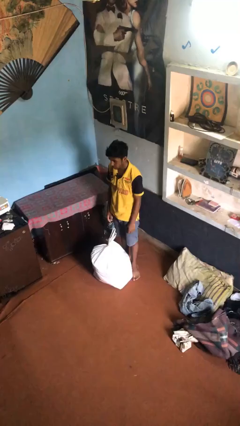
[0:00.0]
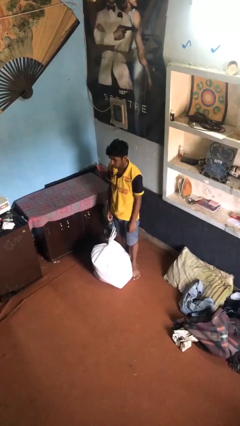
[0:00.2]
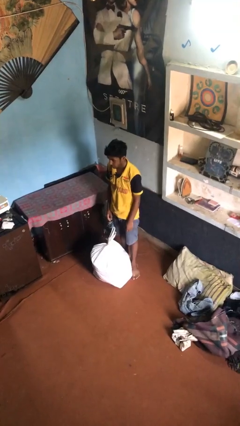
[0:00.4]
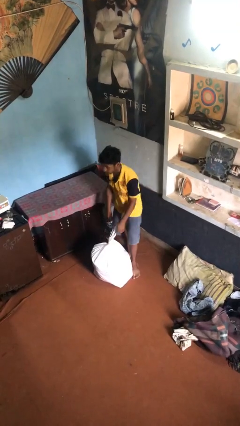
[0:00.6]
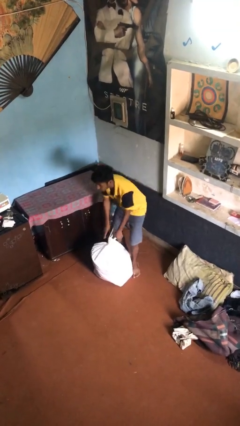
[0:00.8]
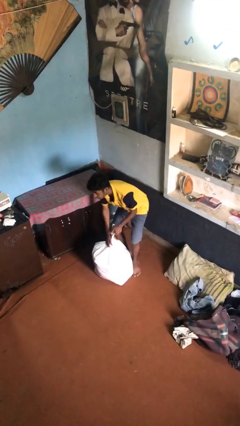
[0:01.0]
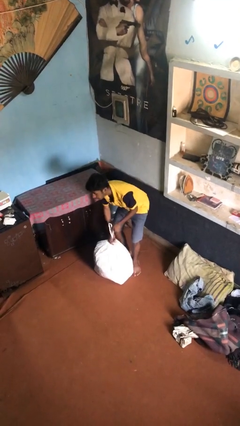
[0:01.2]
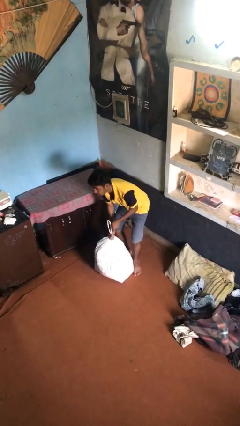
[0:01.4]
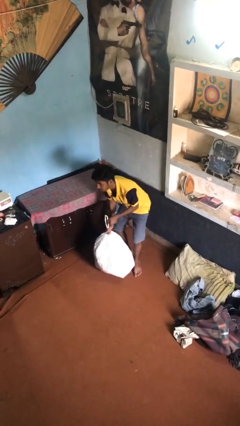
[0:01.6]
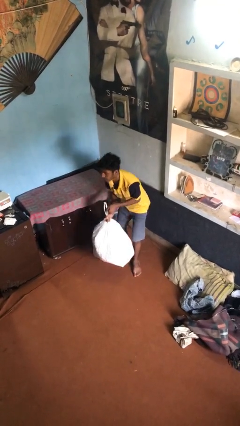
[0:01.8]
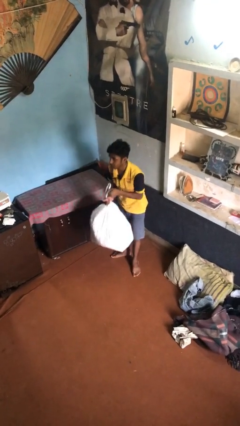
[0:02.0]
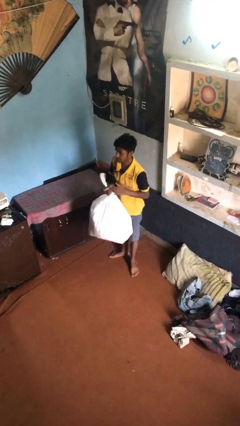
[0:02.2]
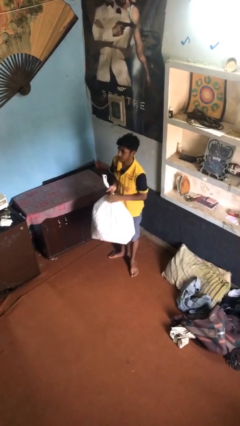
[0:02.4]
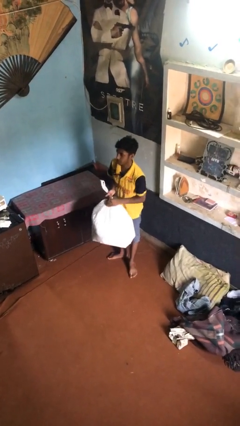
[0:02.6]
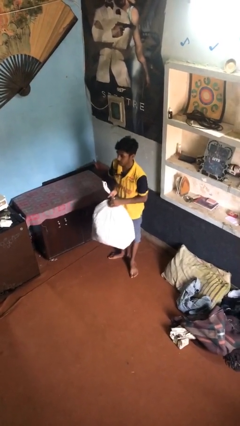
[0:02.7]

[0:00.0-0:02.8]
person picks up object from floor

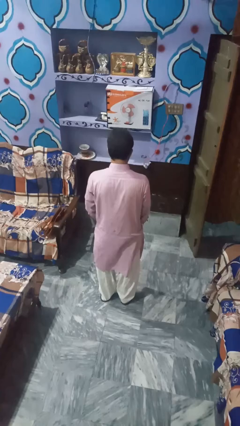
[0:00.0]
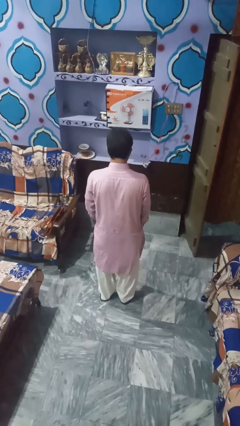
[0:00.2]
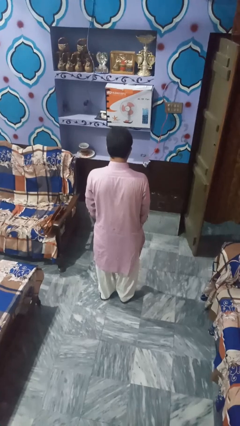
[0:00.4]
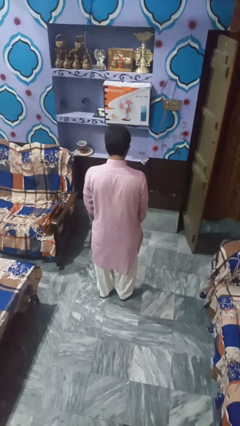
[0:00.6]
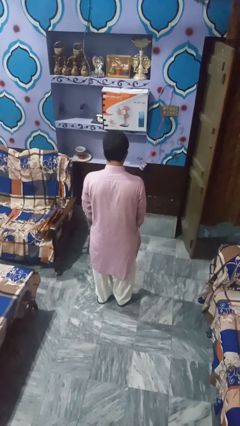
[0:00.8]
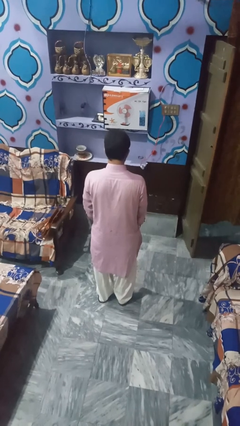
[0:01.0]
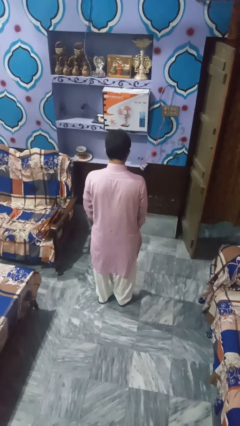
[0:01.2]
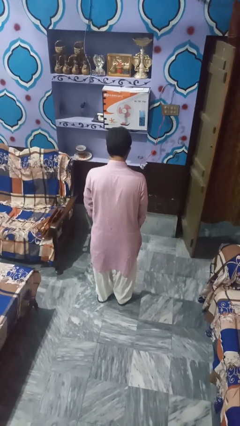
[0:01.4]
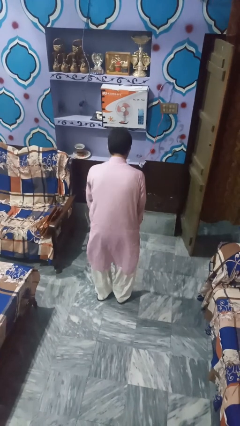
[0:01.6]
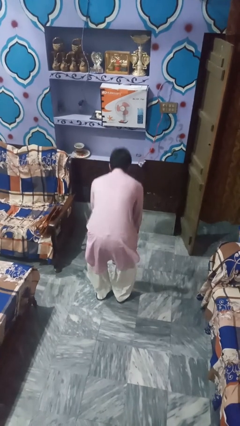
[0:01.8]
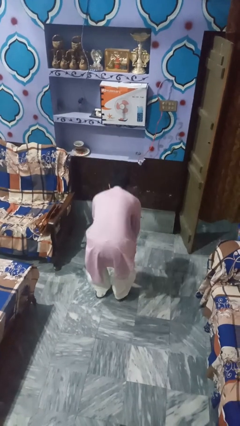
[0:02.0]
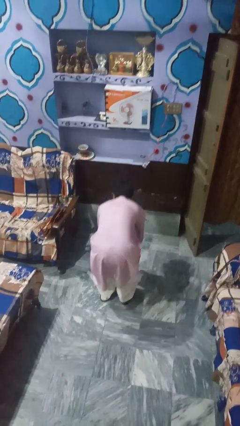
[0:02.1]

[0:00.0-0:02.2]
person catches dropped object

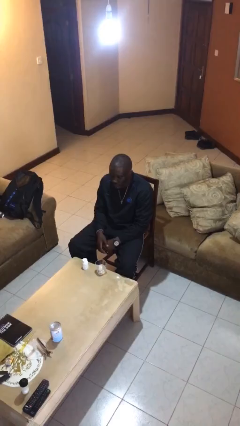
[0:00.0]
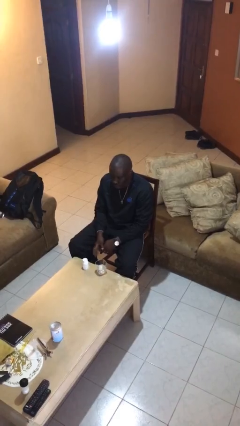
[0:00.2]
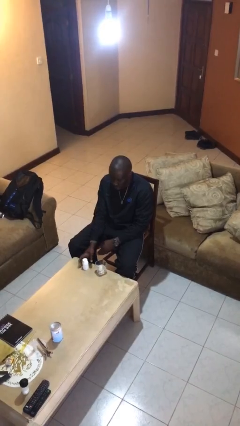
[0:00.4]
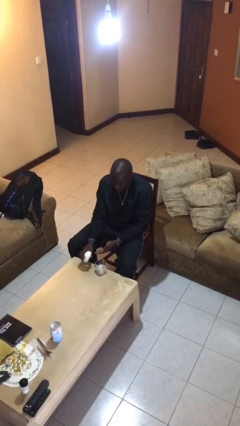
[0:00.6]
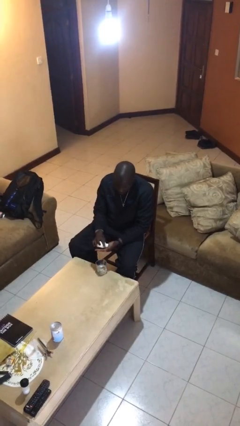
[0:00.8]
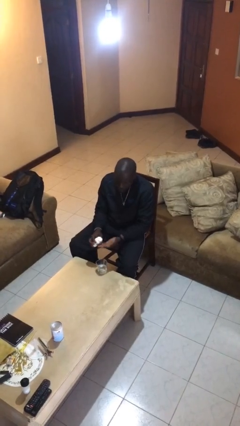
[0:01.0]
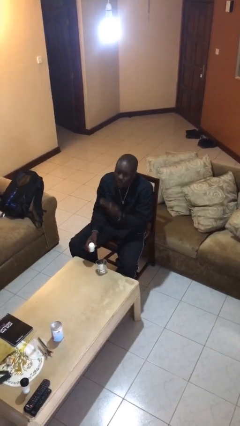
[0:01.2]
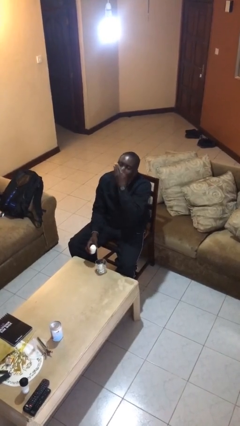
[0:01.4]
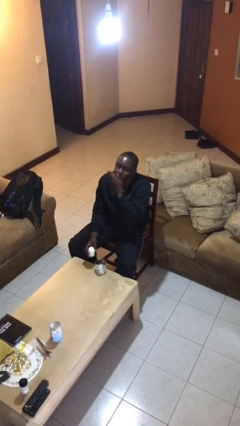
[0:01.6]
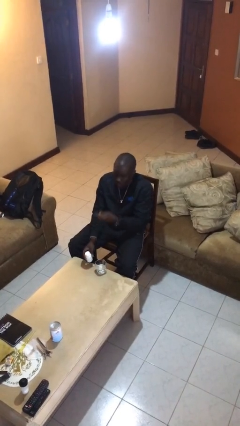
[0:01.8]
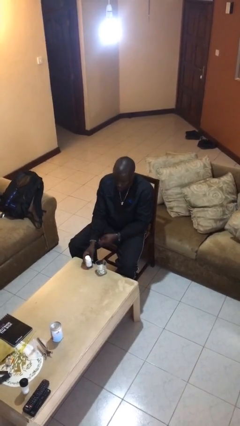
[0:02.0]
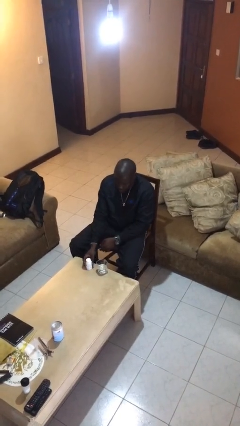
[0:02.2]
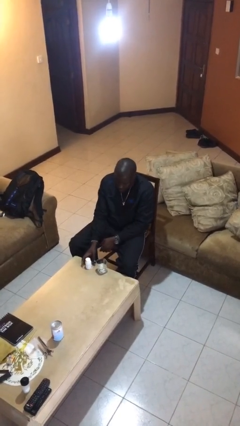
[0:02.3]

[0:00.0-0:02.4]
person takes medicine pills

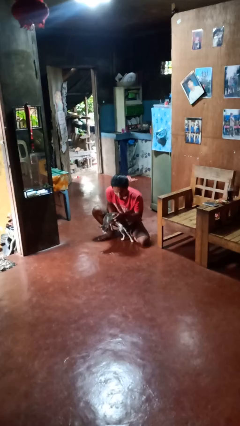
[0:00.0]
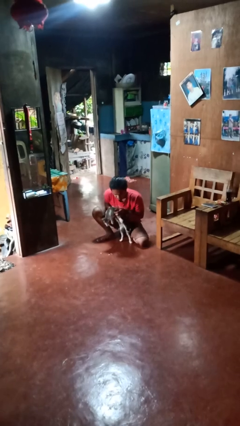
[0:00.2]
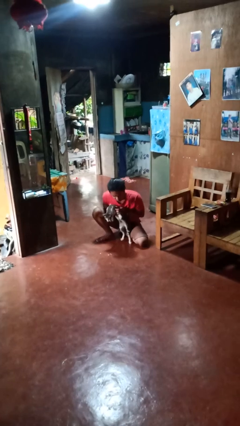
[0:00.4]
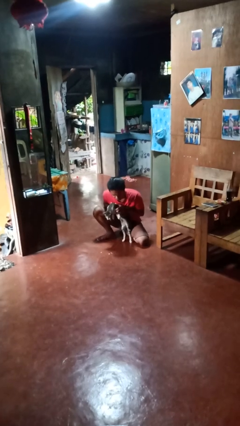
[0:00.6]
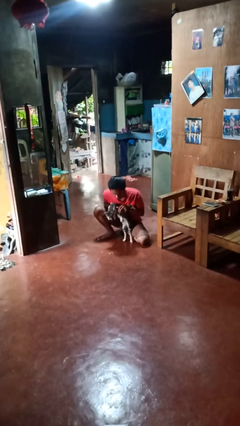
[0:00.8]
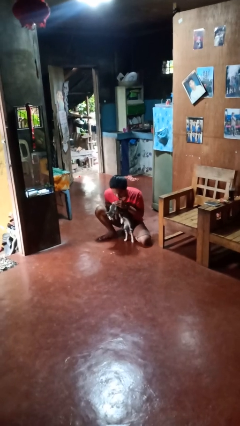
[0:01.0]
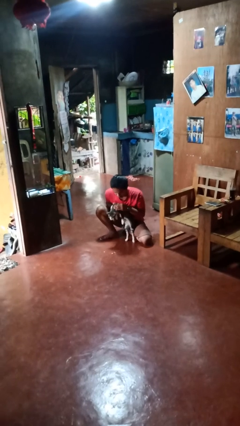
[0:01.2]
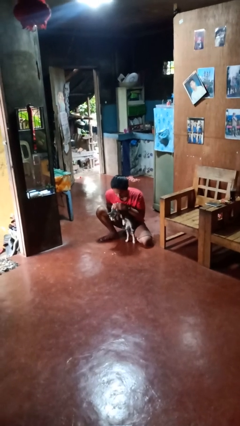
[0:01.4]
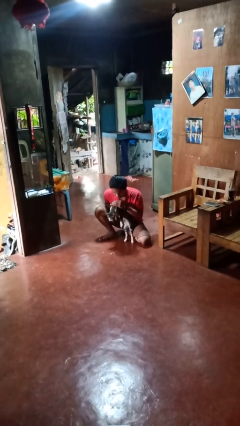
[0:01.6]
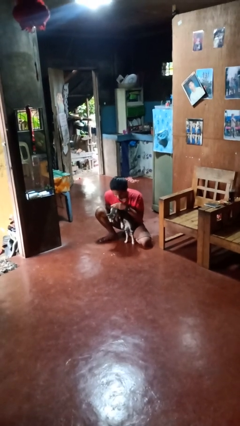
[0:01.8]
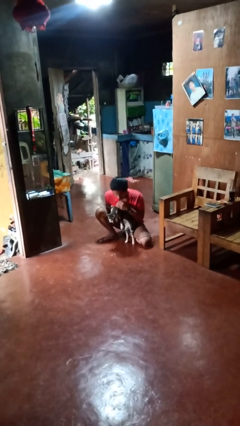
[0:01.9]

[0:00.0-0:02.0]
person hugs cat

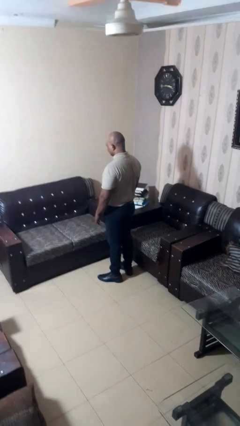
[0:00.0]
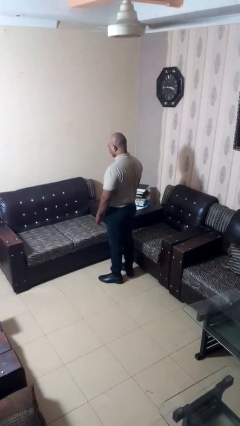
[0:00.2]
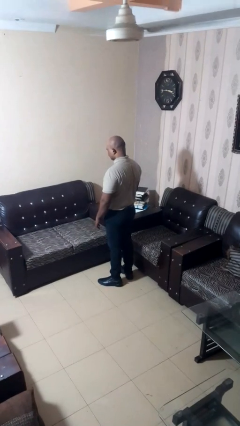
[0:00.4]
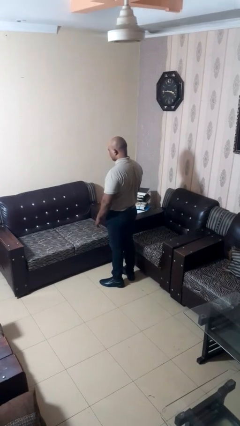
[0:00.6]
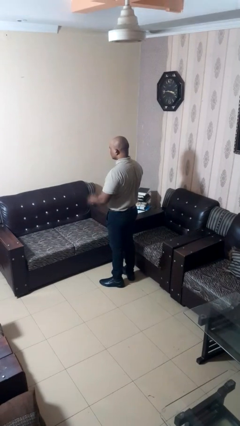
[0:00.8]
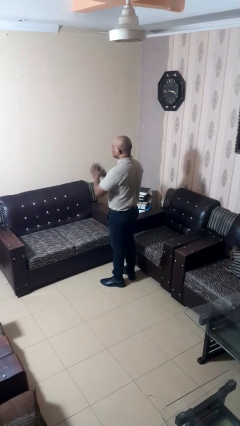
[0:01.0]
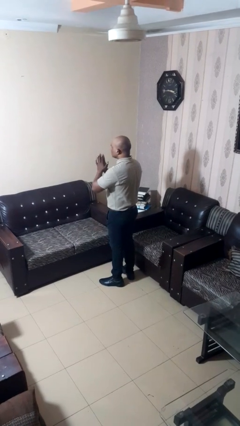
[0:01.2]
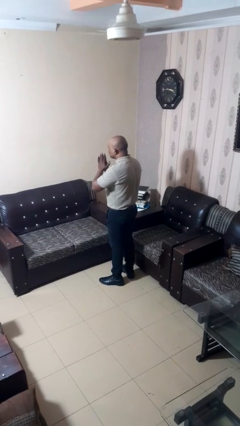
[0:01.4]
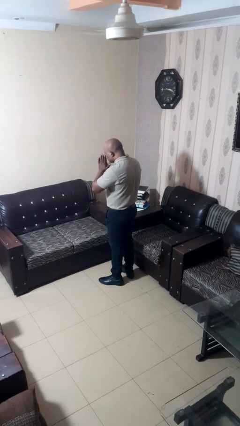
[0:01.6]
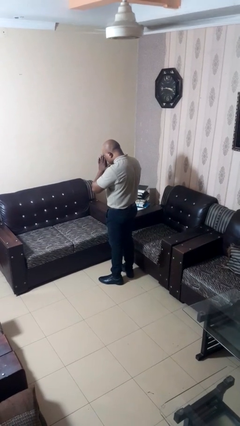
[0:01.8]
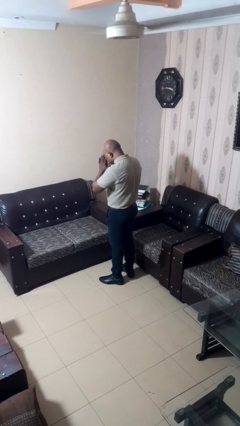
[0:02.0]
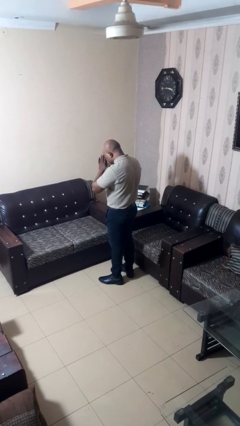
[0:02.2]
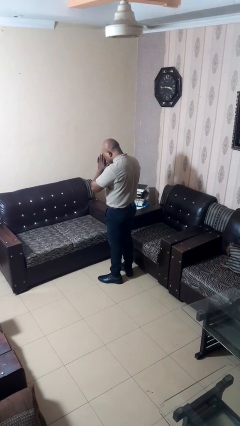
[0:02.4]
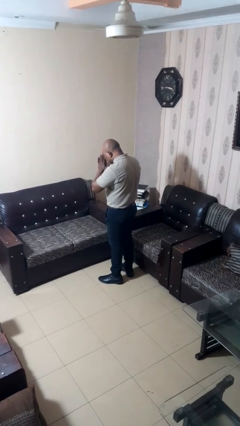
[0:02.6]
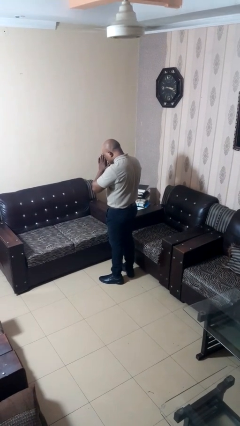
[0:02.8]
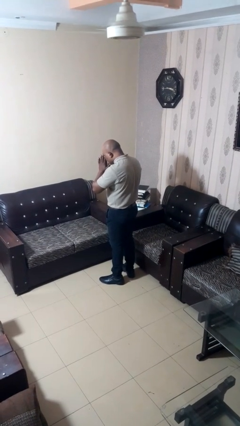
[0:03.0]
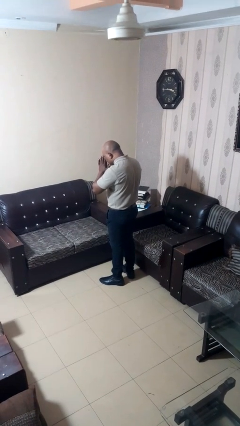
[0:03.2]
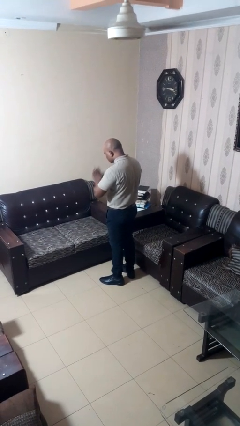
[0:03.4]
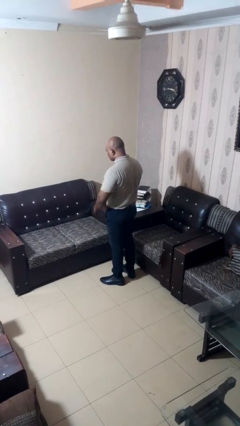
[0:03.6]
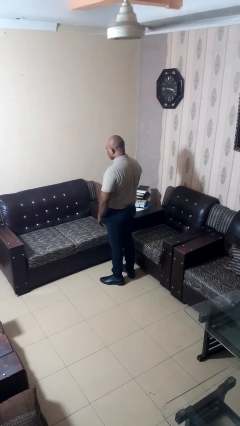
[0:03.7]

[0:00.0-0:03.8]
person prays

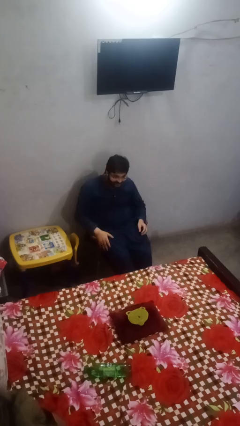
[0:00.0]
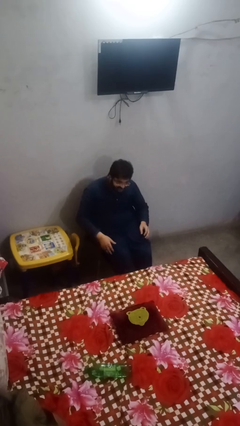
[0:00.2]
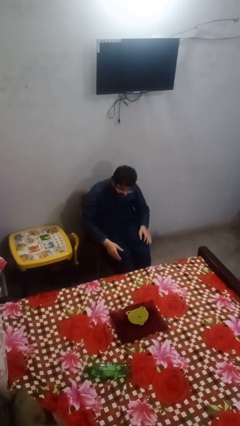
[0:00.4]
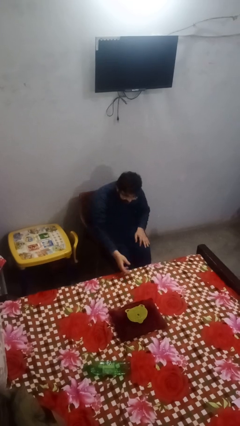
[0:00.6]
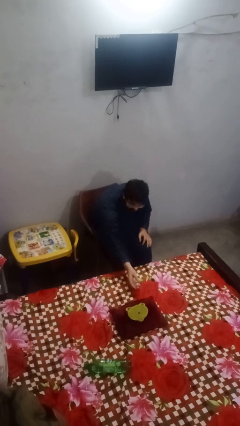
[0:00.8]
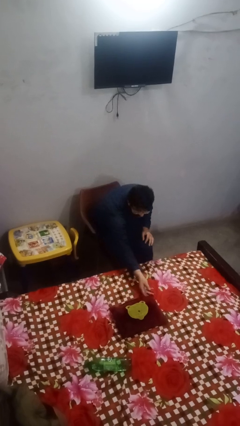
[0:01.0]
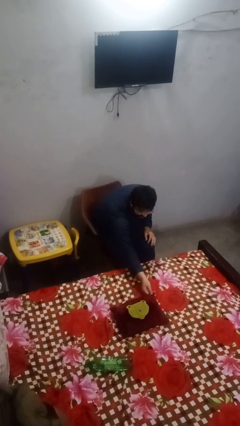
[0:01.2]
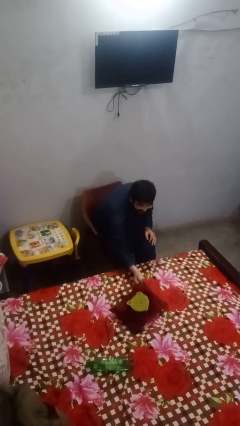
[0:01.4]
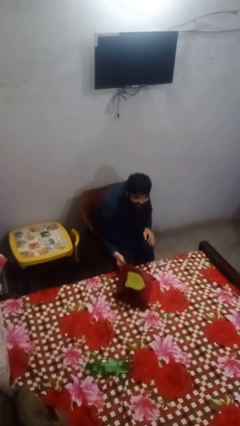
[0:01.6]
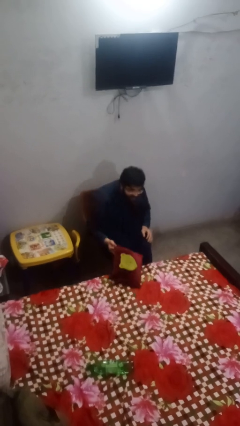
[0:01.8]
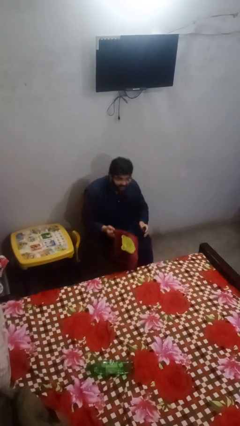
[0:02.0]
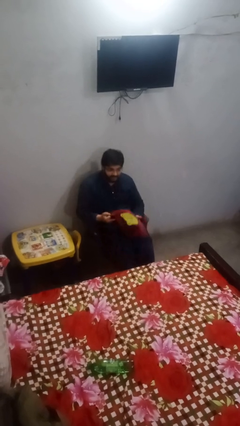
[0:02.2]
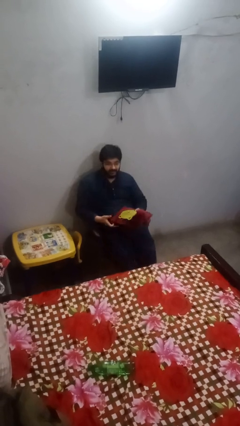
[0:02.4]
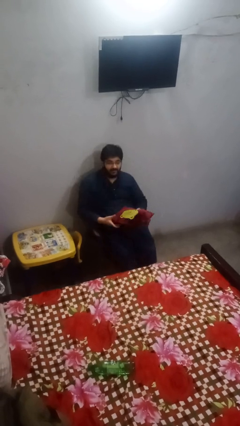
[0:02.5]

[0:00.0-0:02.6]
person picks up object from bed

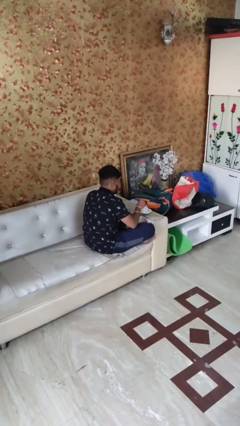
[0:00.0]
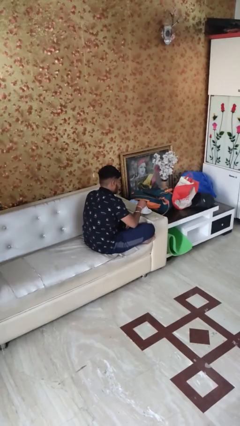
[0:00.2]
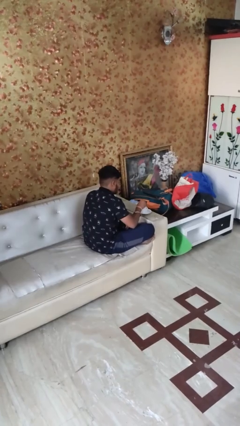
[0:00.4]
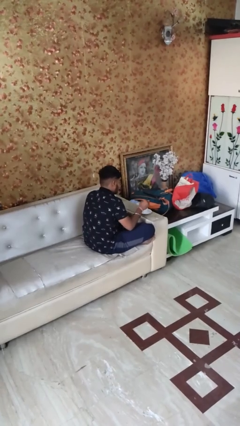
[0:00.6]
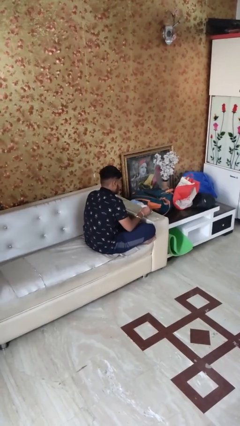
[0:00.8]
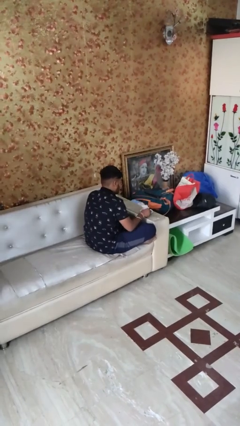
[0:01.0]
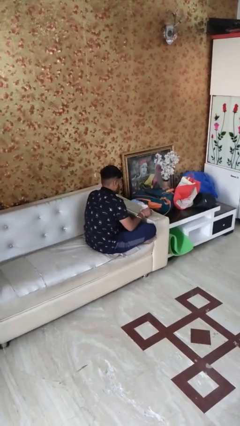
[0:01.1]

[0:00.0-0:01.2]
person stirs mug

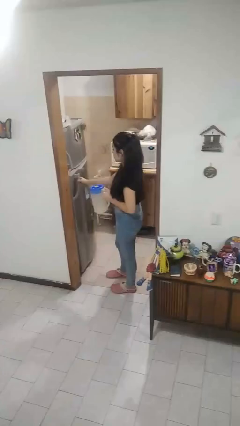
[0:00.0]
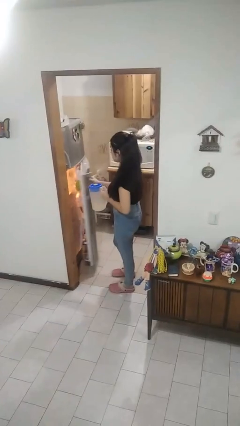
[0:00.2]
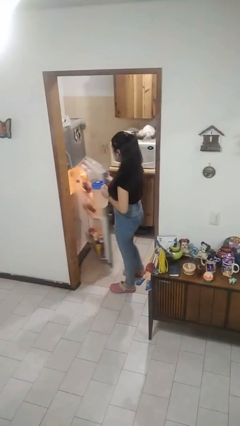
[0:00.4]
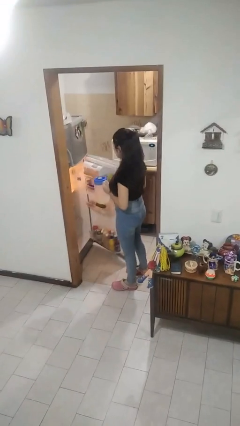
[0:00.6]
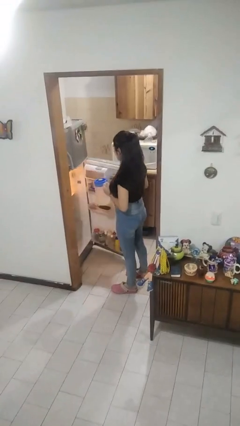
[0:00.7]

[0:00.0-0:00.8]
person opens refrigerator
